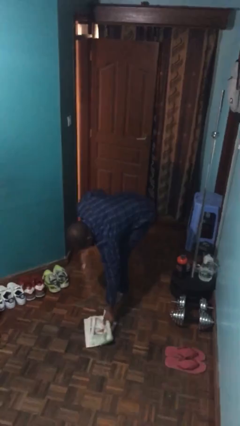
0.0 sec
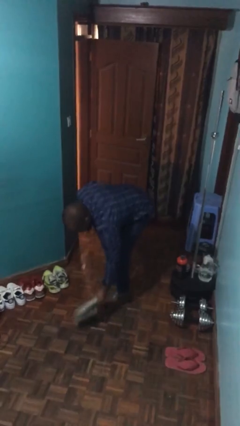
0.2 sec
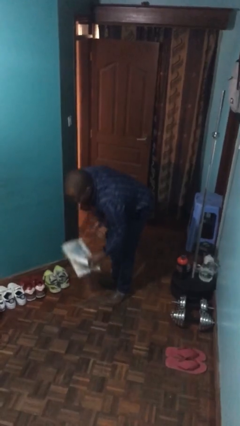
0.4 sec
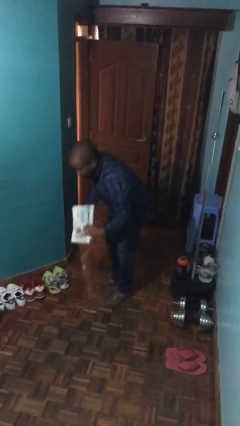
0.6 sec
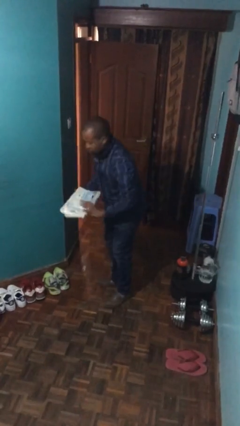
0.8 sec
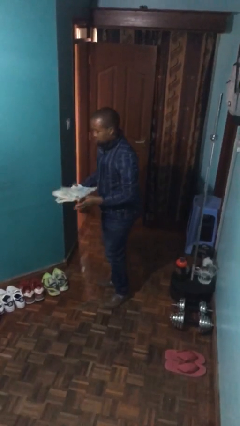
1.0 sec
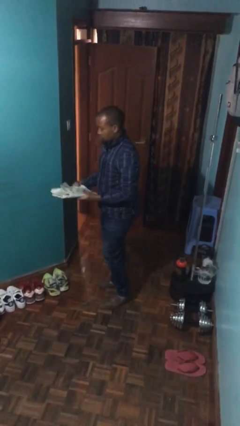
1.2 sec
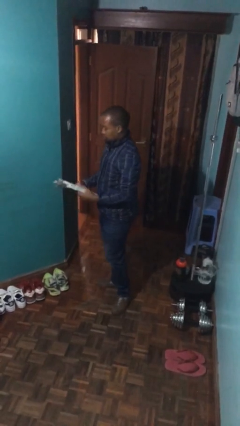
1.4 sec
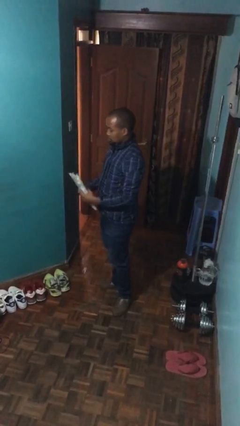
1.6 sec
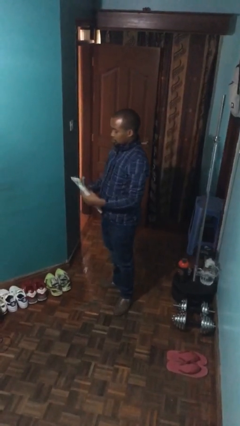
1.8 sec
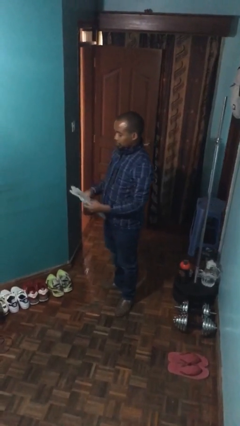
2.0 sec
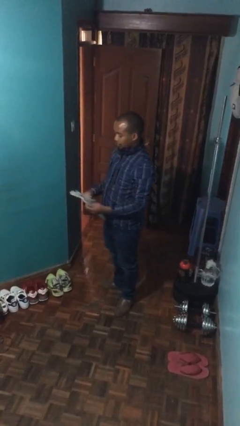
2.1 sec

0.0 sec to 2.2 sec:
person picks up object from floor

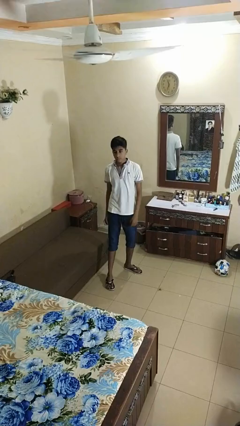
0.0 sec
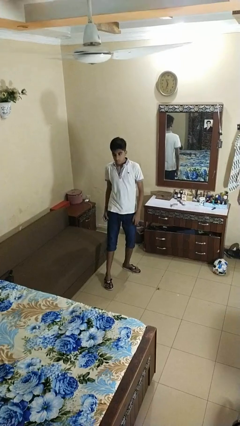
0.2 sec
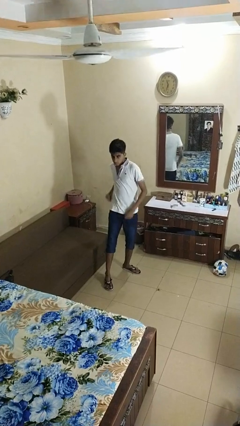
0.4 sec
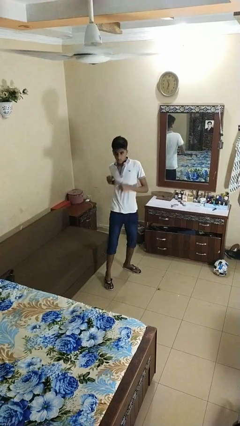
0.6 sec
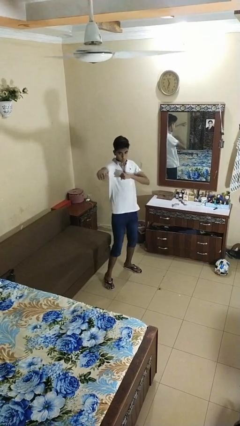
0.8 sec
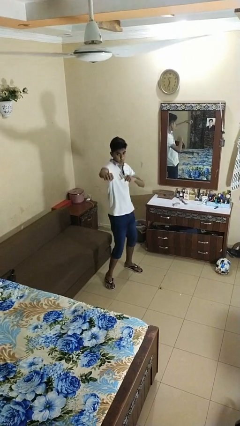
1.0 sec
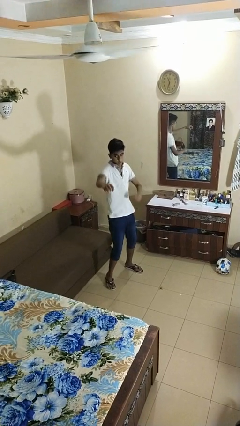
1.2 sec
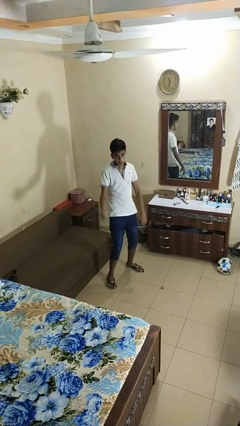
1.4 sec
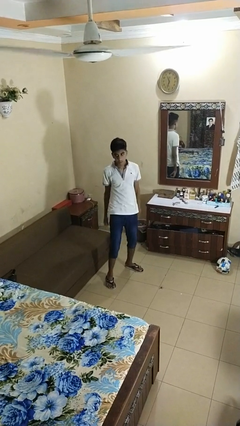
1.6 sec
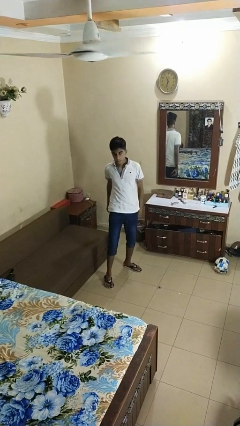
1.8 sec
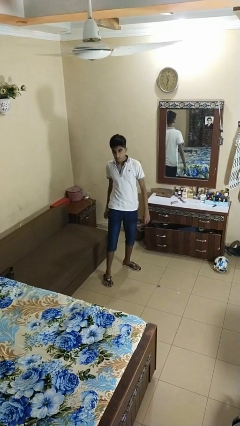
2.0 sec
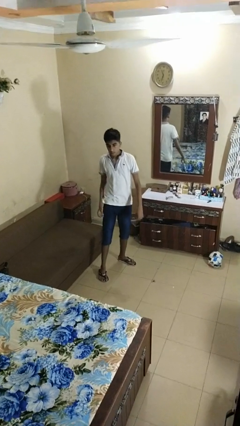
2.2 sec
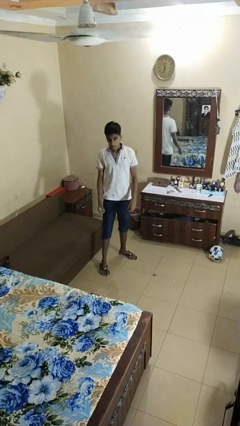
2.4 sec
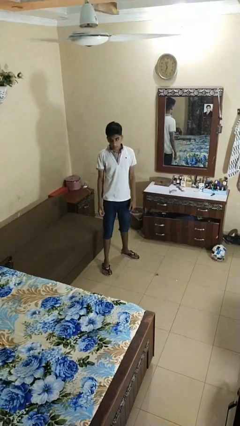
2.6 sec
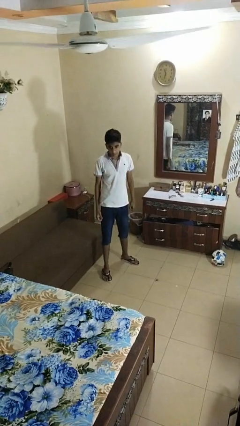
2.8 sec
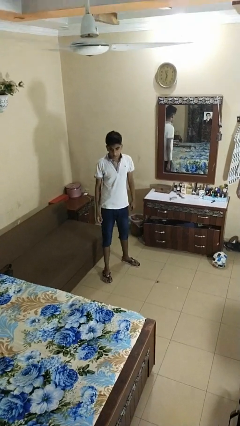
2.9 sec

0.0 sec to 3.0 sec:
person karate chop

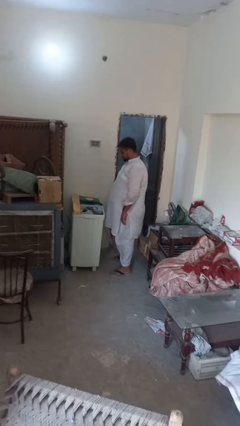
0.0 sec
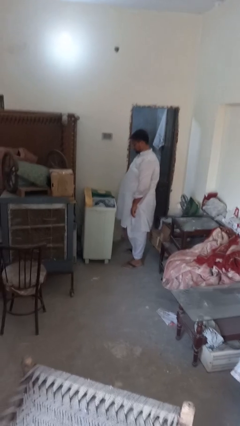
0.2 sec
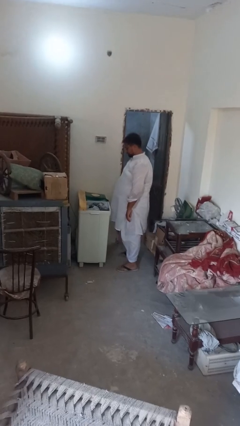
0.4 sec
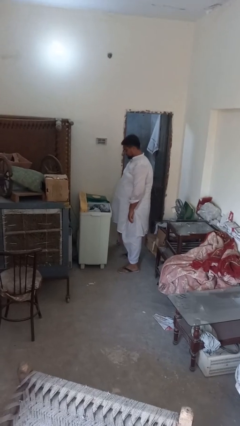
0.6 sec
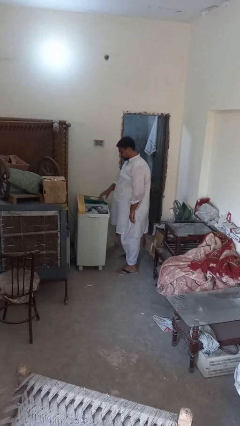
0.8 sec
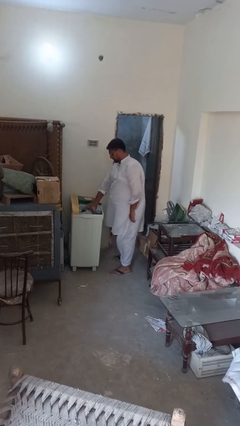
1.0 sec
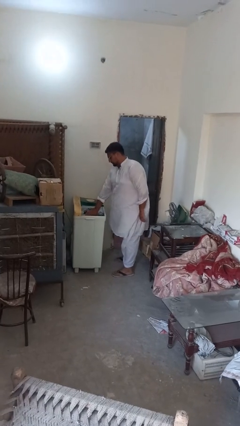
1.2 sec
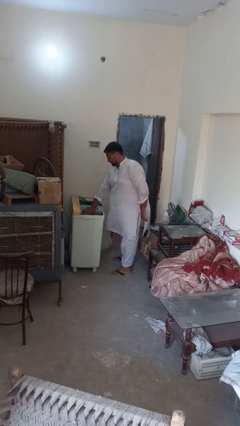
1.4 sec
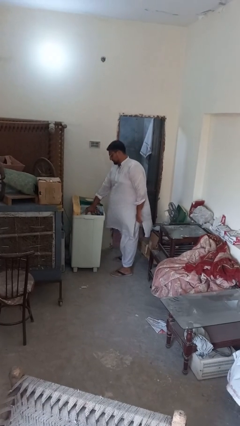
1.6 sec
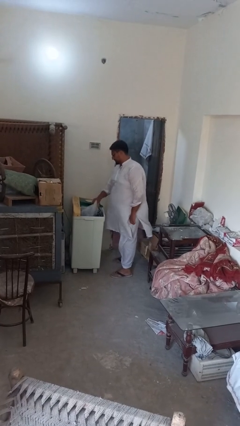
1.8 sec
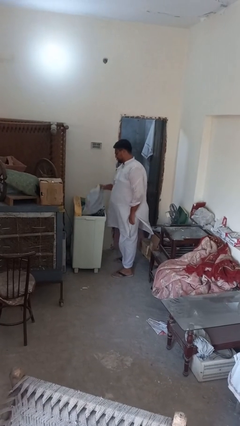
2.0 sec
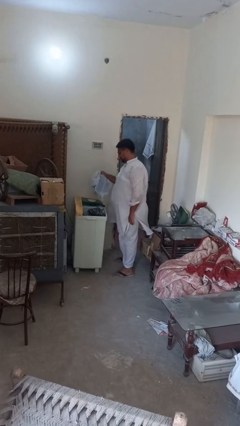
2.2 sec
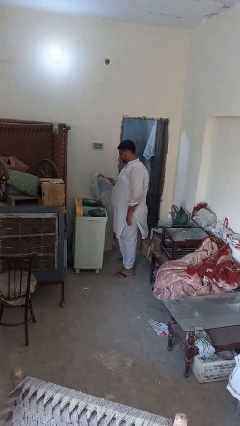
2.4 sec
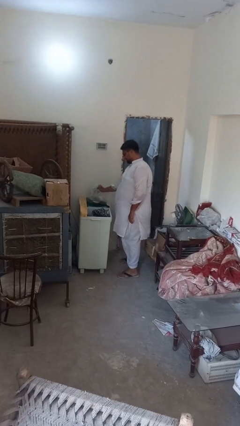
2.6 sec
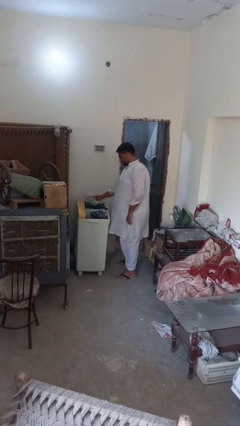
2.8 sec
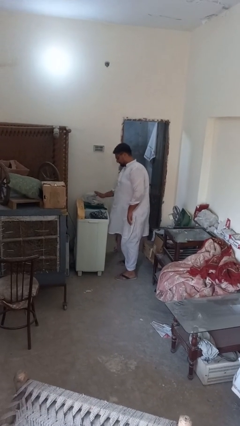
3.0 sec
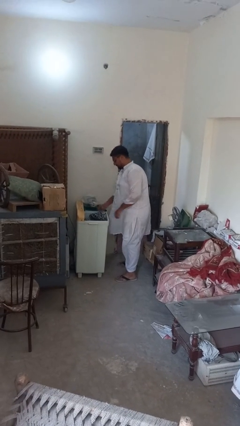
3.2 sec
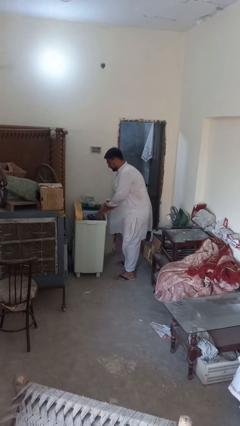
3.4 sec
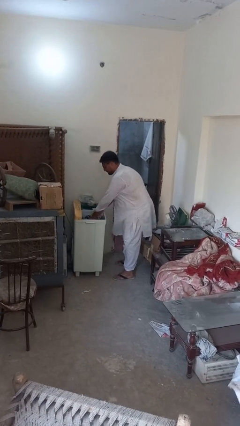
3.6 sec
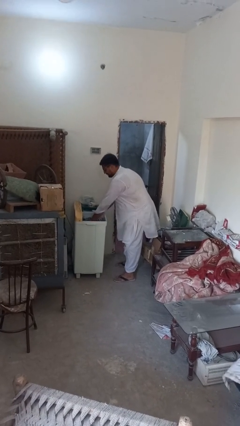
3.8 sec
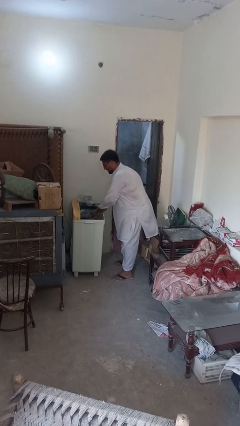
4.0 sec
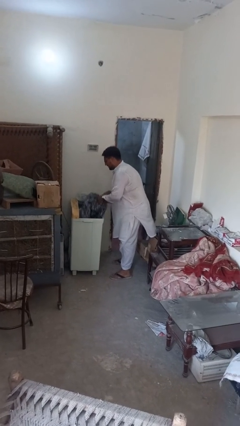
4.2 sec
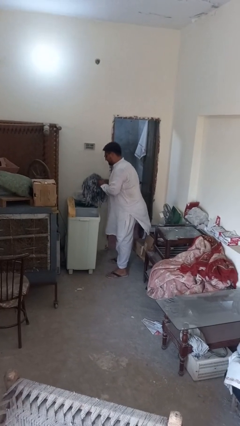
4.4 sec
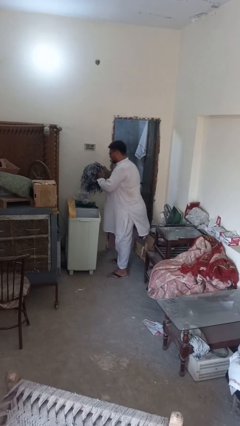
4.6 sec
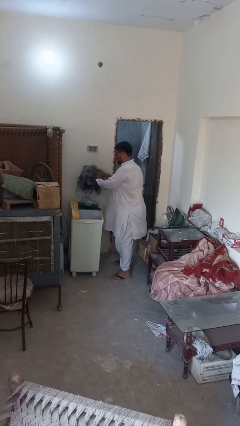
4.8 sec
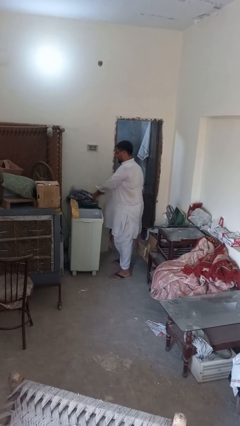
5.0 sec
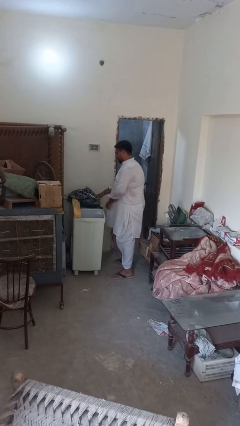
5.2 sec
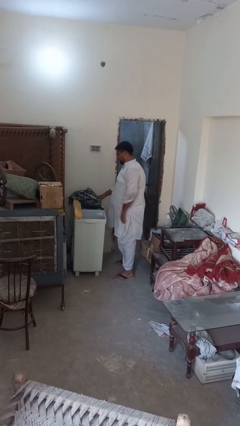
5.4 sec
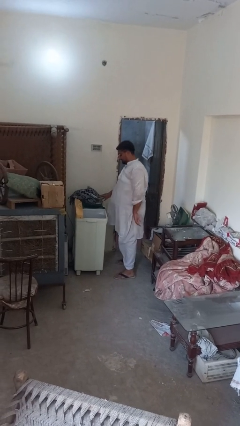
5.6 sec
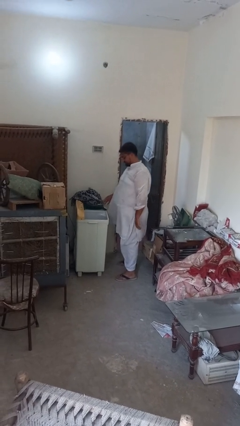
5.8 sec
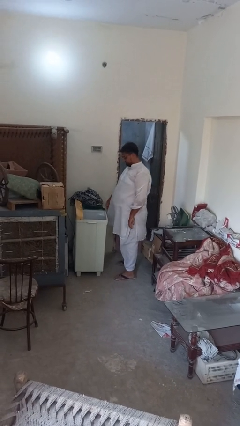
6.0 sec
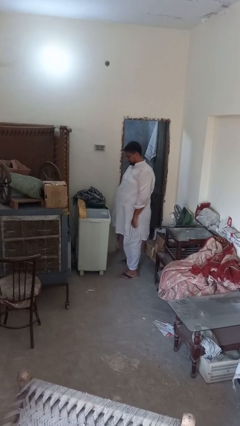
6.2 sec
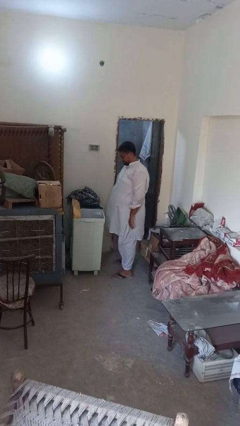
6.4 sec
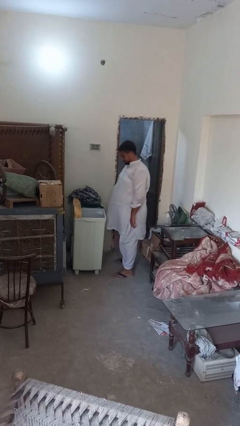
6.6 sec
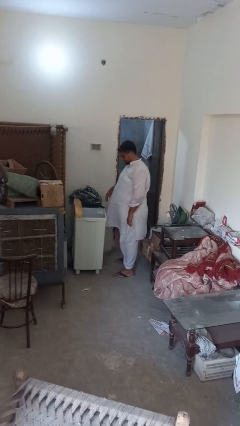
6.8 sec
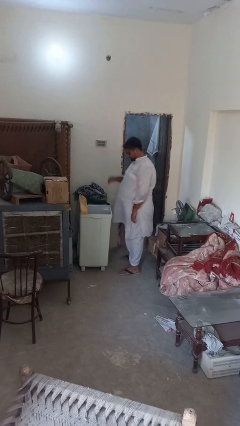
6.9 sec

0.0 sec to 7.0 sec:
person unloads clotheswasher

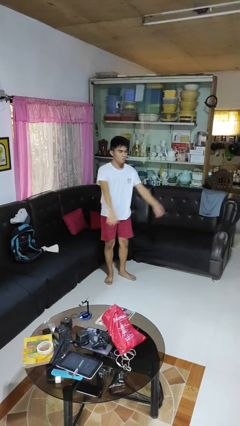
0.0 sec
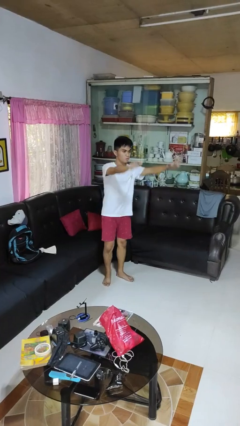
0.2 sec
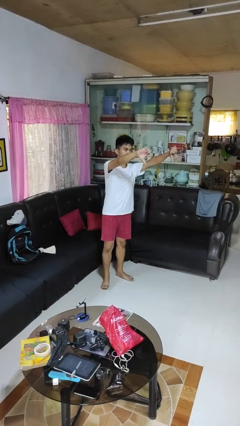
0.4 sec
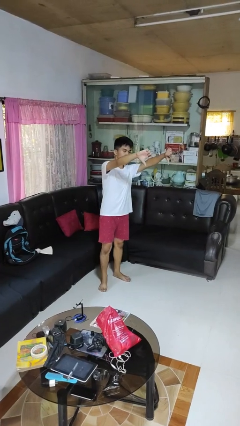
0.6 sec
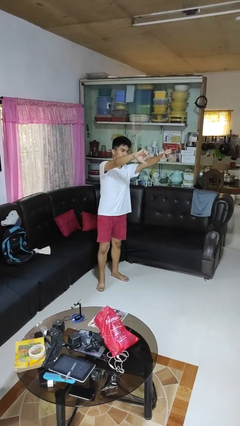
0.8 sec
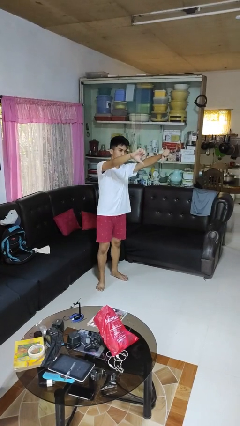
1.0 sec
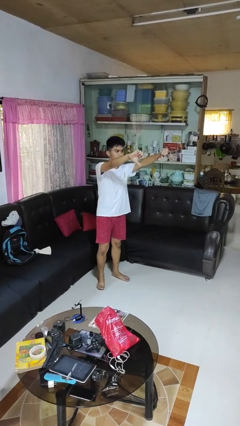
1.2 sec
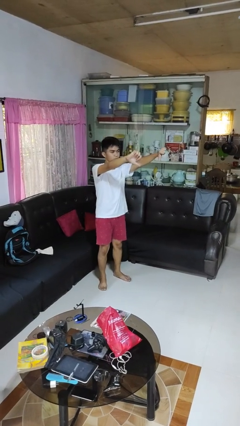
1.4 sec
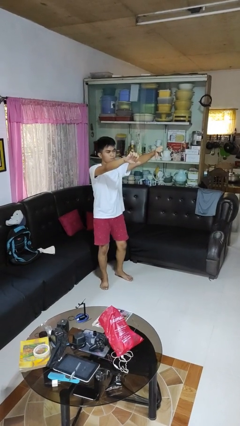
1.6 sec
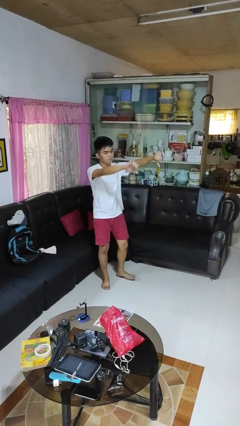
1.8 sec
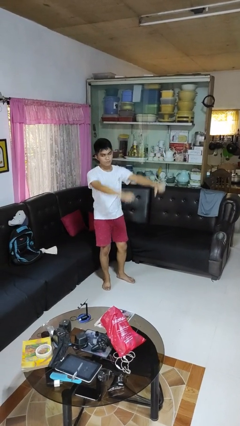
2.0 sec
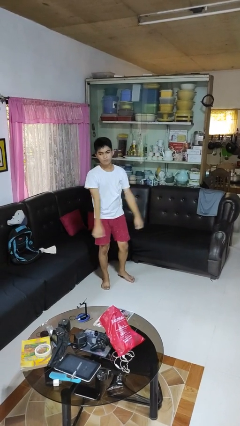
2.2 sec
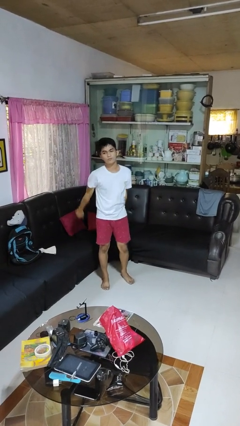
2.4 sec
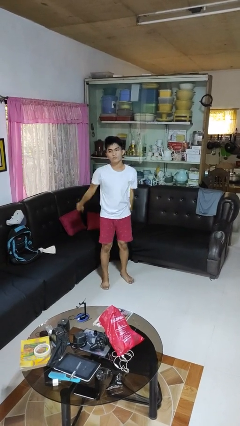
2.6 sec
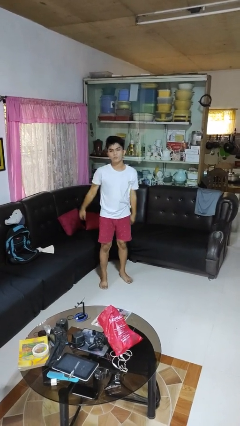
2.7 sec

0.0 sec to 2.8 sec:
person gestures thumbs down

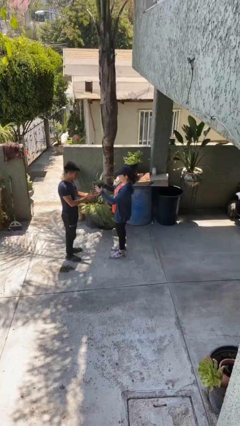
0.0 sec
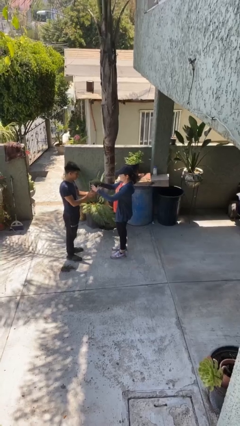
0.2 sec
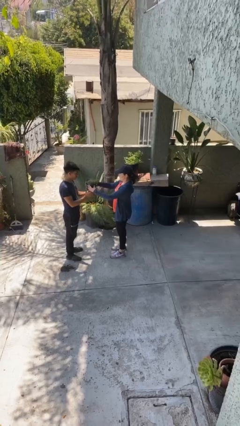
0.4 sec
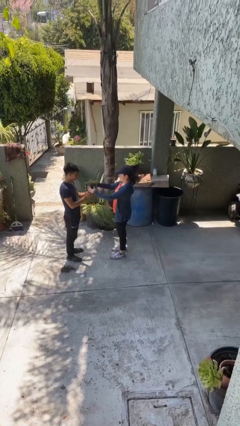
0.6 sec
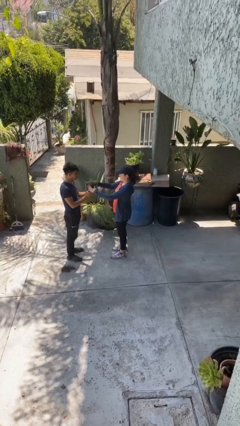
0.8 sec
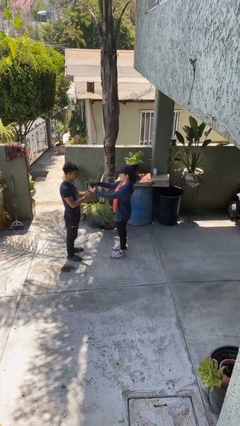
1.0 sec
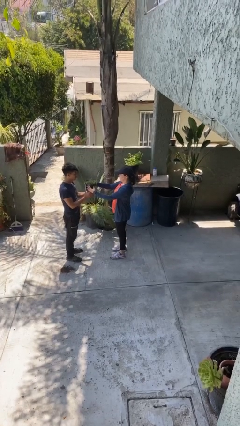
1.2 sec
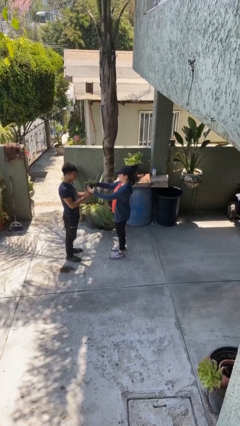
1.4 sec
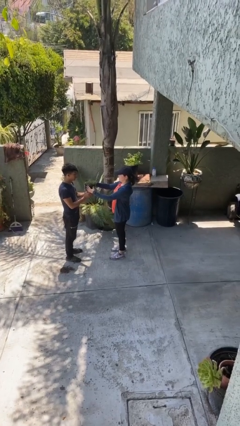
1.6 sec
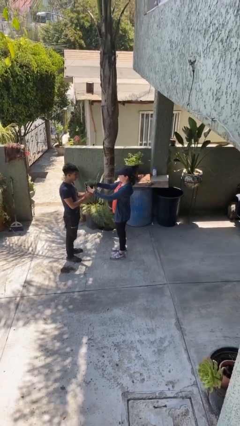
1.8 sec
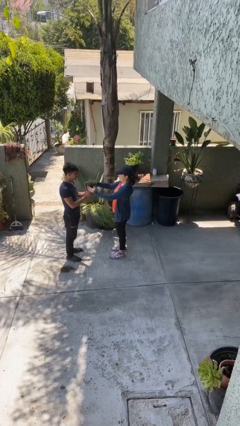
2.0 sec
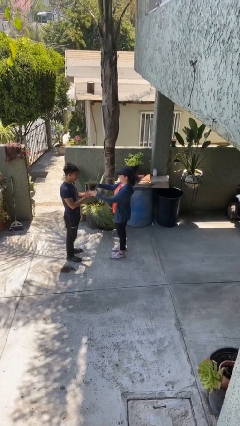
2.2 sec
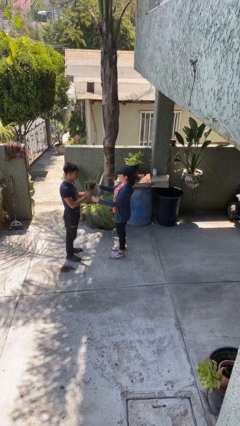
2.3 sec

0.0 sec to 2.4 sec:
person transfers object to person

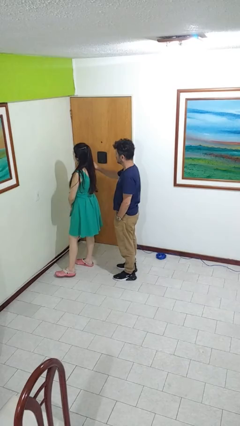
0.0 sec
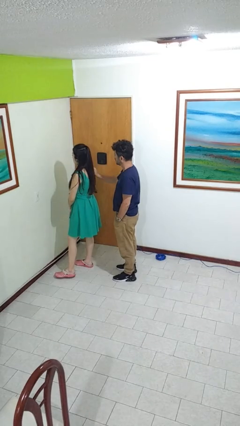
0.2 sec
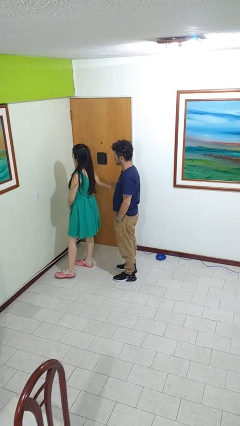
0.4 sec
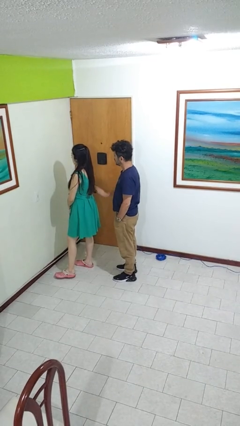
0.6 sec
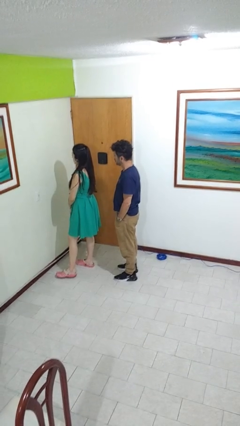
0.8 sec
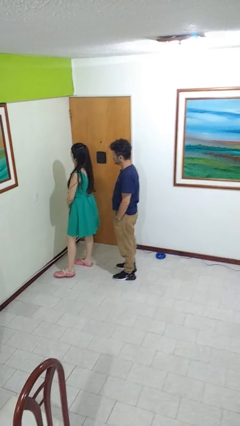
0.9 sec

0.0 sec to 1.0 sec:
person touches back of person
